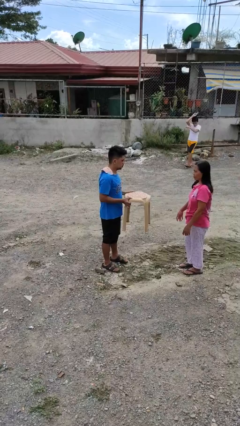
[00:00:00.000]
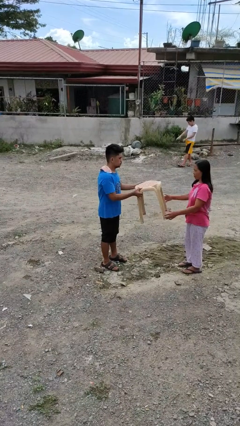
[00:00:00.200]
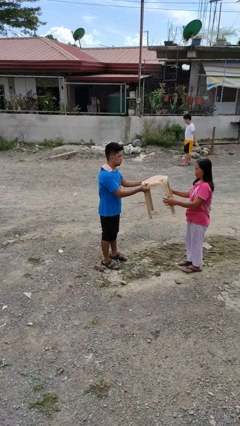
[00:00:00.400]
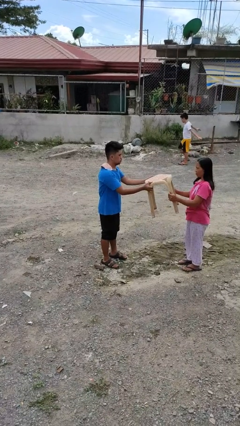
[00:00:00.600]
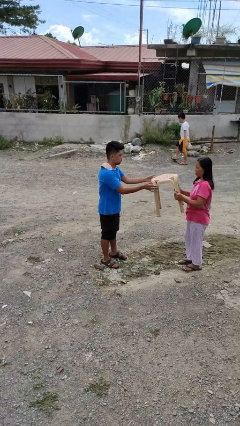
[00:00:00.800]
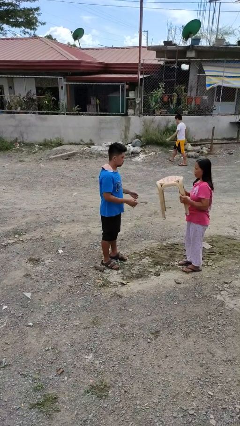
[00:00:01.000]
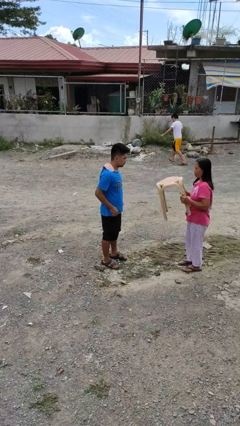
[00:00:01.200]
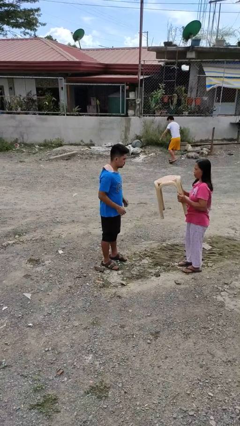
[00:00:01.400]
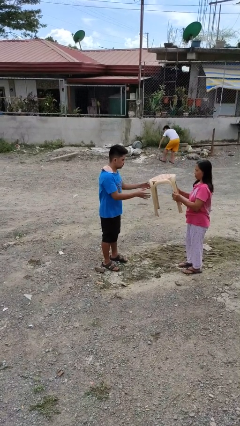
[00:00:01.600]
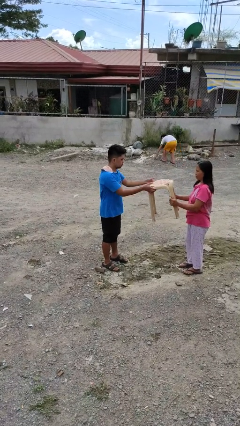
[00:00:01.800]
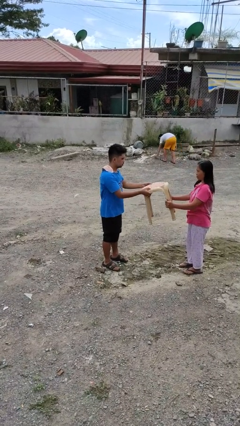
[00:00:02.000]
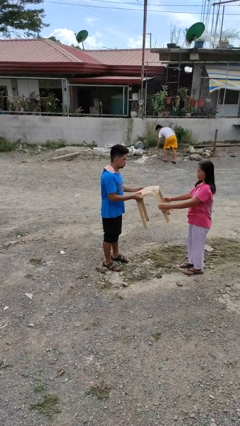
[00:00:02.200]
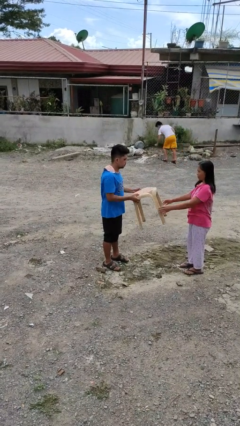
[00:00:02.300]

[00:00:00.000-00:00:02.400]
person transfers object to person

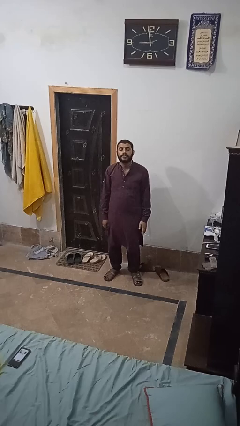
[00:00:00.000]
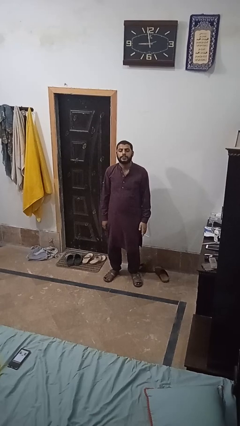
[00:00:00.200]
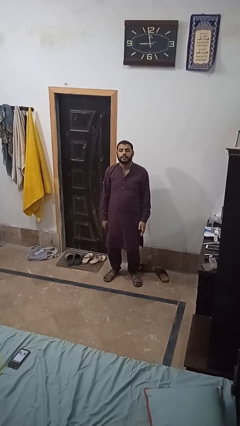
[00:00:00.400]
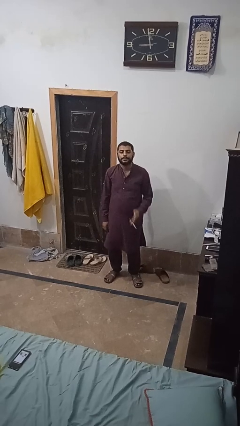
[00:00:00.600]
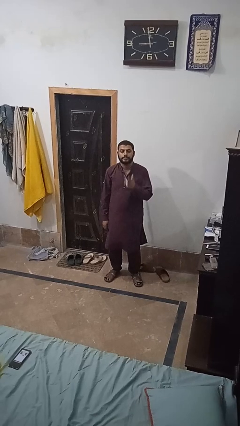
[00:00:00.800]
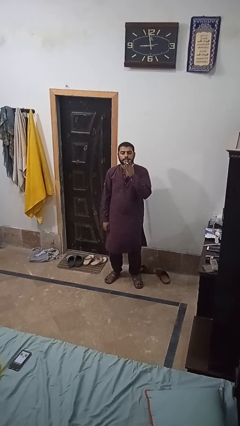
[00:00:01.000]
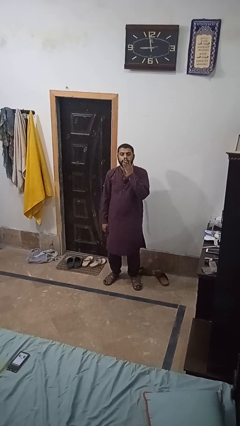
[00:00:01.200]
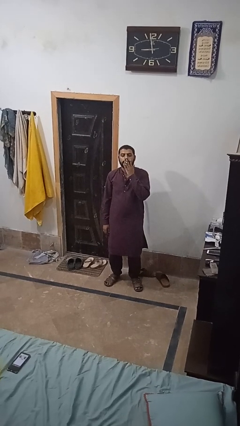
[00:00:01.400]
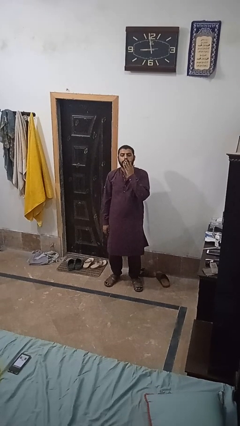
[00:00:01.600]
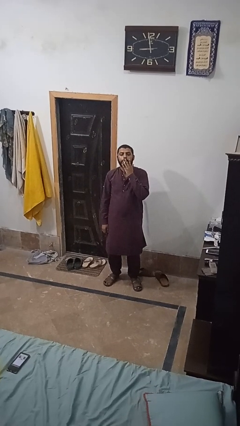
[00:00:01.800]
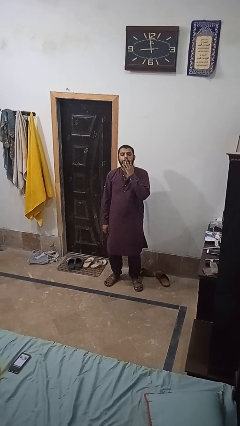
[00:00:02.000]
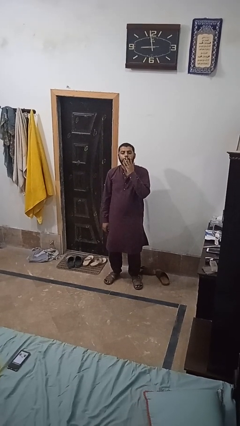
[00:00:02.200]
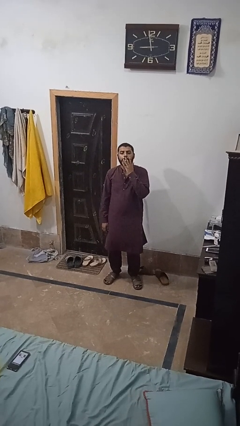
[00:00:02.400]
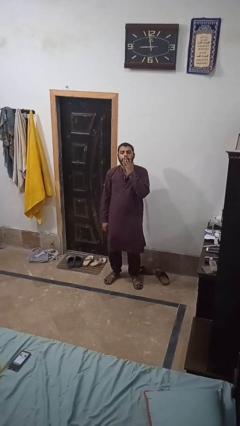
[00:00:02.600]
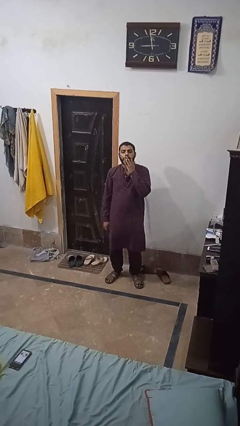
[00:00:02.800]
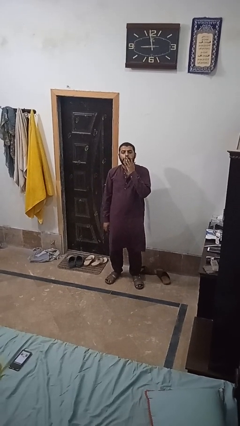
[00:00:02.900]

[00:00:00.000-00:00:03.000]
person vapes

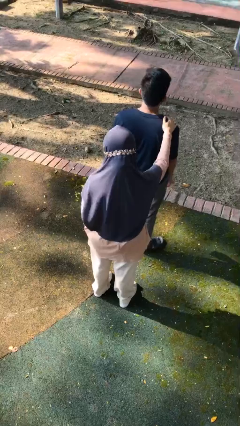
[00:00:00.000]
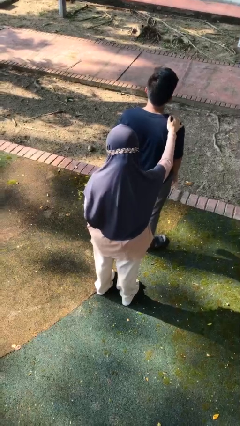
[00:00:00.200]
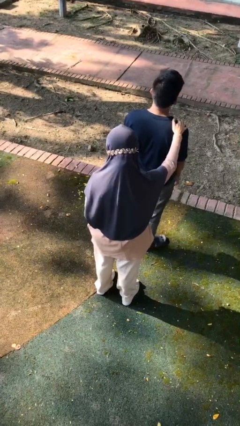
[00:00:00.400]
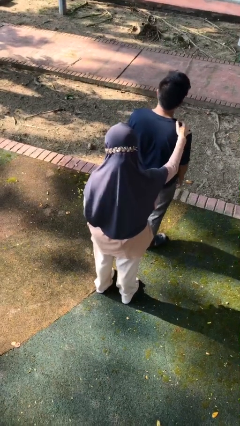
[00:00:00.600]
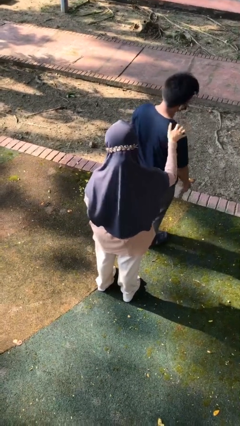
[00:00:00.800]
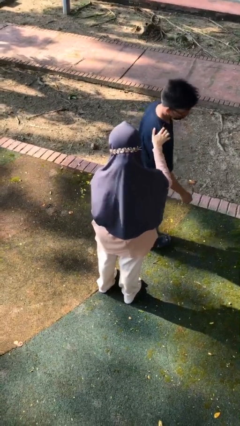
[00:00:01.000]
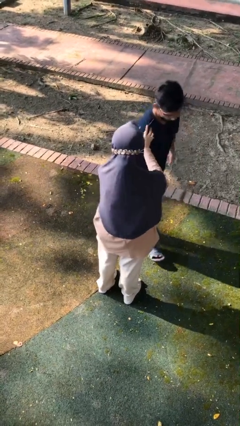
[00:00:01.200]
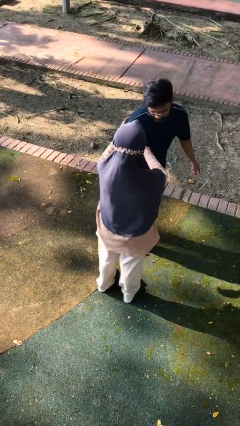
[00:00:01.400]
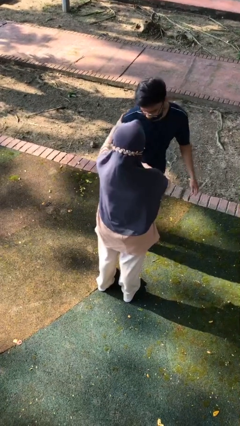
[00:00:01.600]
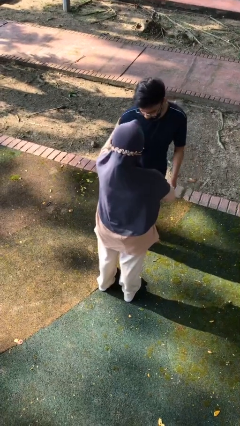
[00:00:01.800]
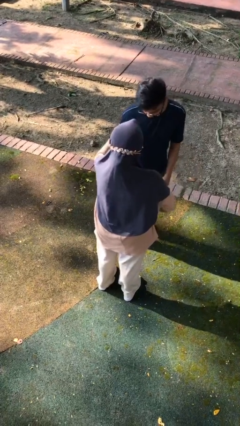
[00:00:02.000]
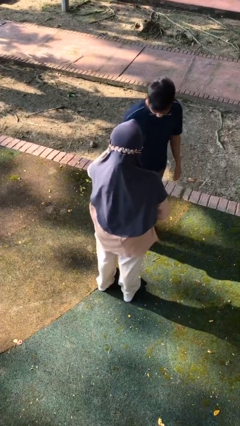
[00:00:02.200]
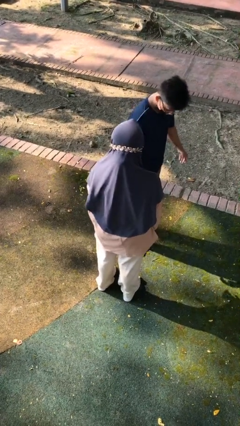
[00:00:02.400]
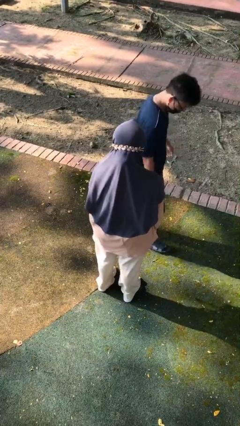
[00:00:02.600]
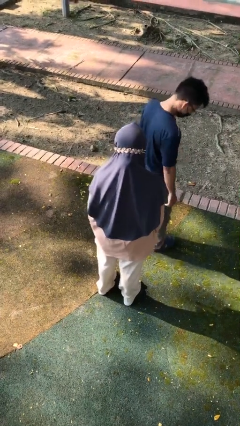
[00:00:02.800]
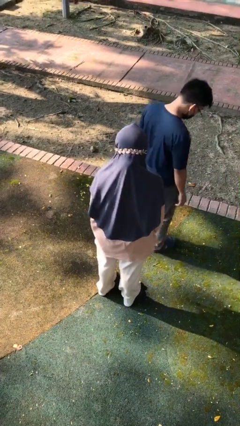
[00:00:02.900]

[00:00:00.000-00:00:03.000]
person spins person around

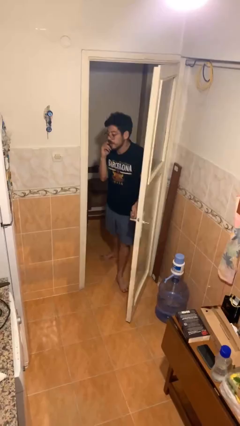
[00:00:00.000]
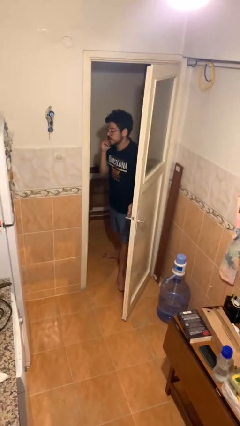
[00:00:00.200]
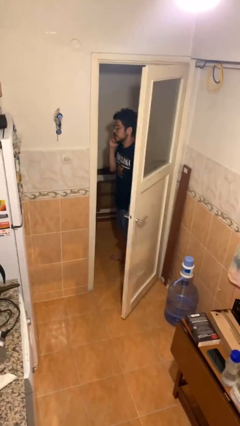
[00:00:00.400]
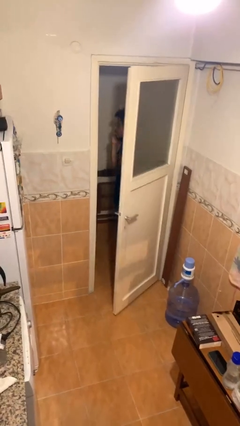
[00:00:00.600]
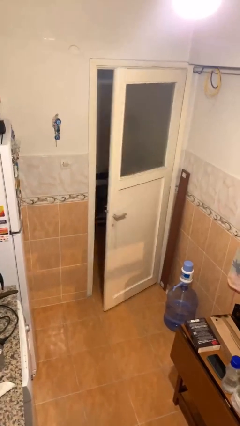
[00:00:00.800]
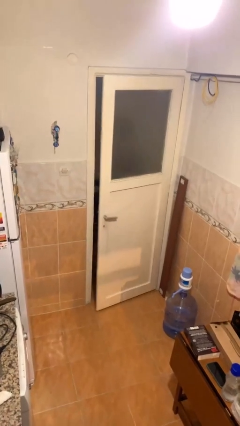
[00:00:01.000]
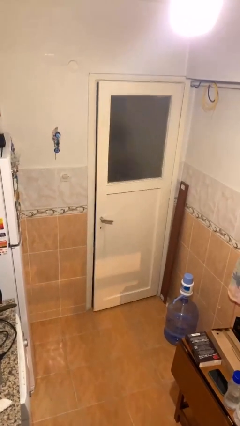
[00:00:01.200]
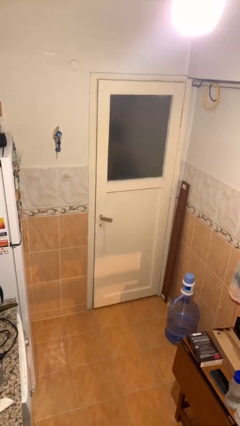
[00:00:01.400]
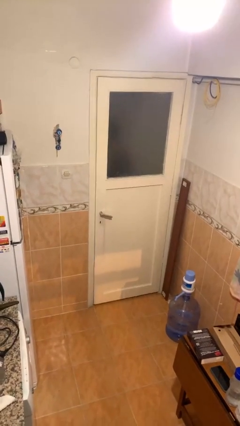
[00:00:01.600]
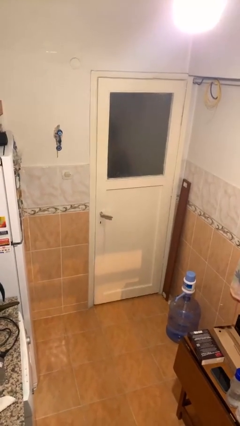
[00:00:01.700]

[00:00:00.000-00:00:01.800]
person closes facility door

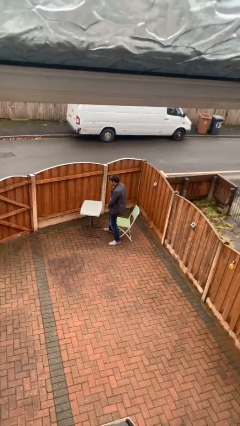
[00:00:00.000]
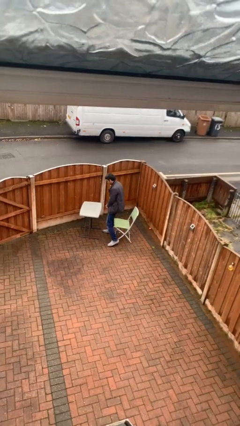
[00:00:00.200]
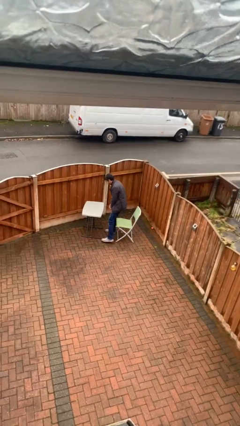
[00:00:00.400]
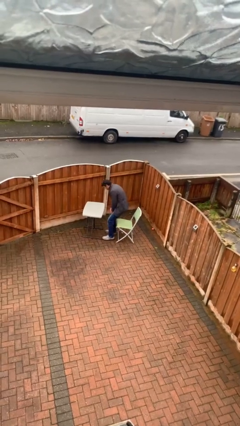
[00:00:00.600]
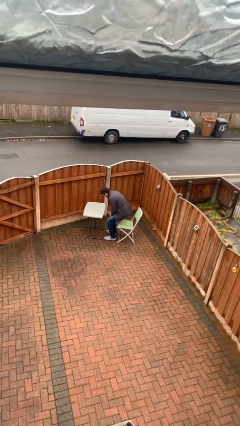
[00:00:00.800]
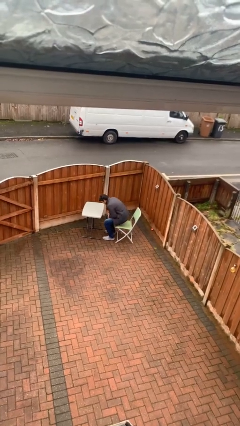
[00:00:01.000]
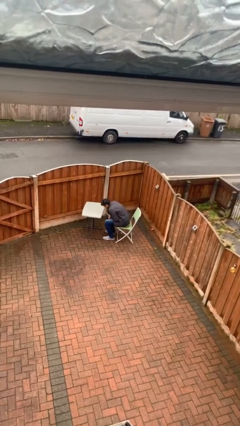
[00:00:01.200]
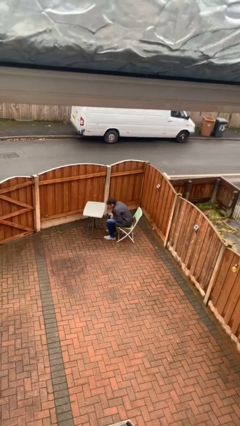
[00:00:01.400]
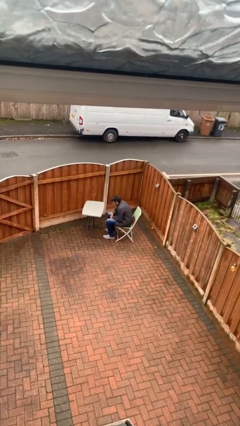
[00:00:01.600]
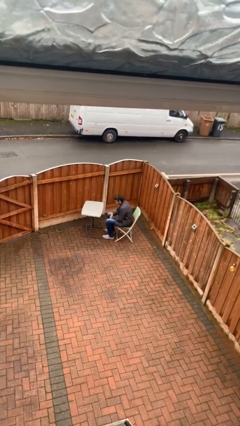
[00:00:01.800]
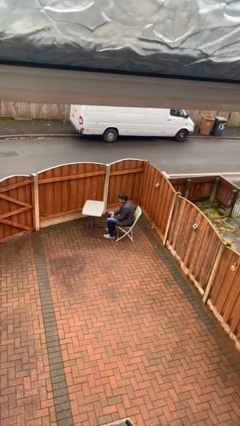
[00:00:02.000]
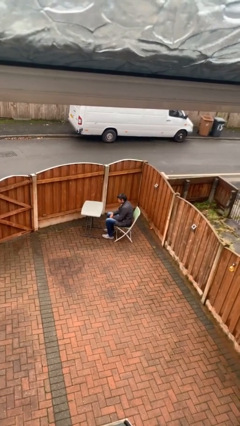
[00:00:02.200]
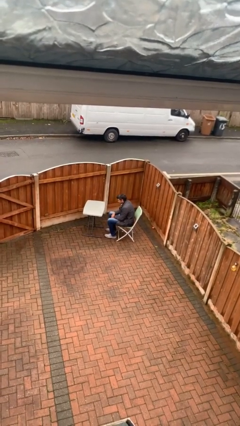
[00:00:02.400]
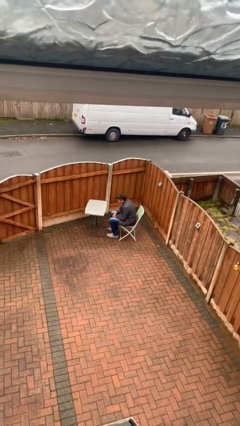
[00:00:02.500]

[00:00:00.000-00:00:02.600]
person sits down

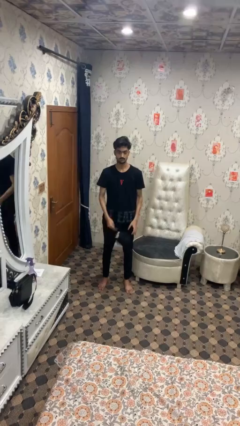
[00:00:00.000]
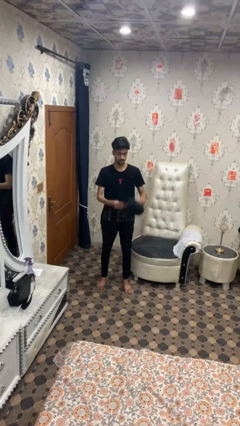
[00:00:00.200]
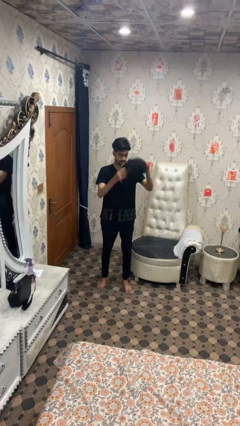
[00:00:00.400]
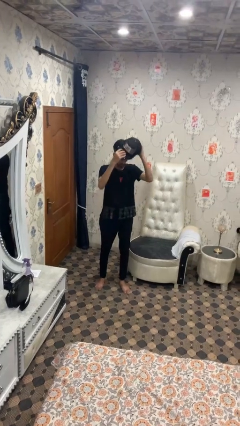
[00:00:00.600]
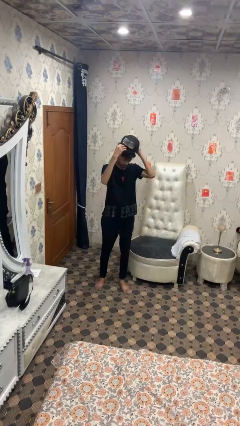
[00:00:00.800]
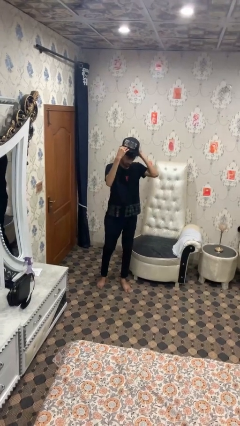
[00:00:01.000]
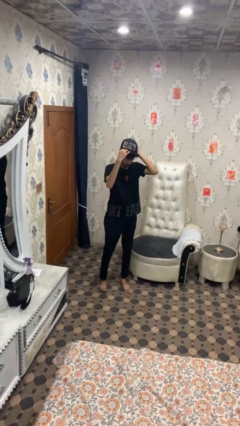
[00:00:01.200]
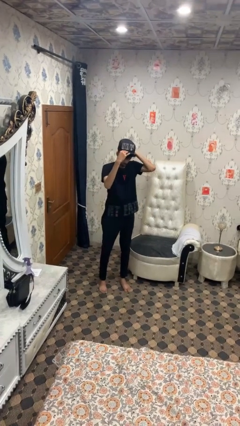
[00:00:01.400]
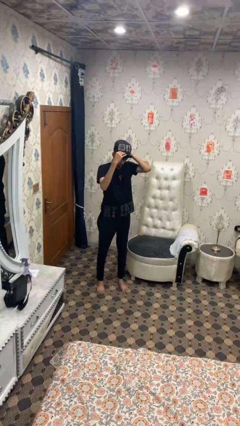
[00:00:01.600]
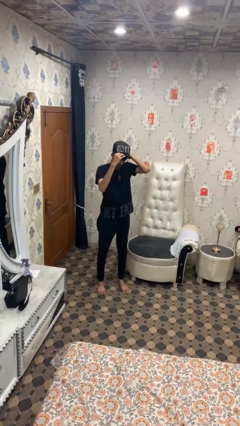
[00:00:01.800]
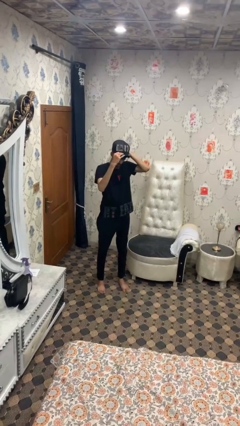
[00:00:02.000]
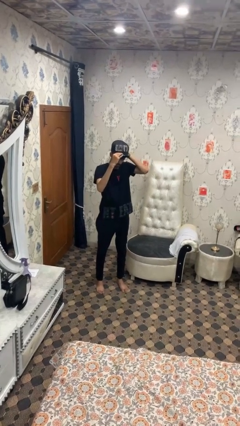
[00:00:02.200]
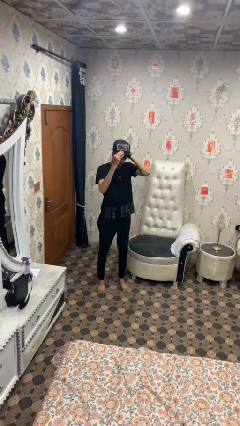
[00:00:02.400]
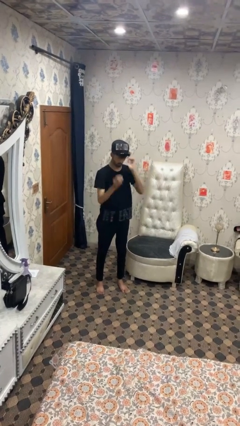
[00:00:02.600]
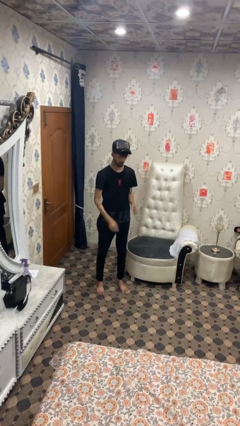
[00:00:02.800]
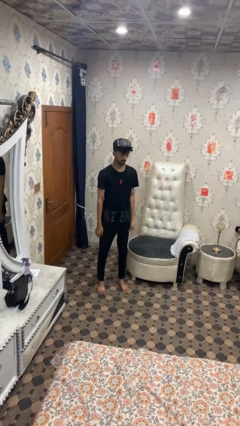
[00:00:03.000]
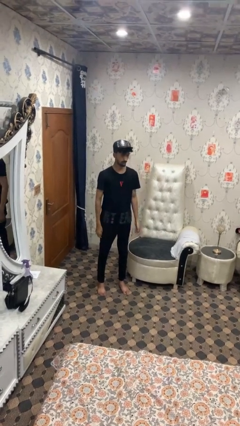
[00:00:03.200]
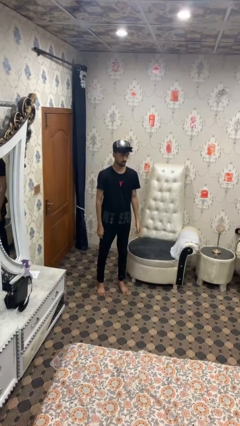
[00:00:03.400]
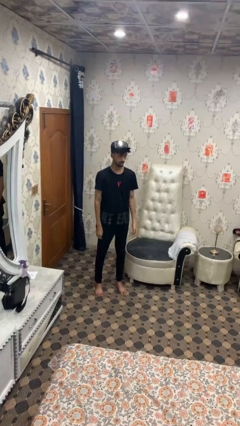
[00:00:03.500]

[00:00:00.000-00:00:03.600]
person puts on hat

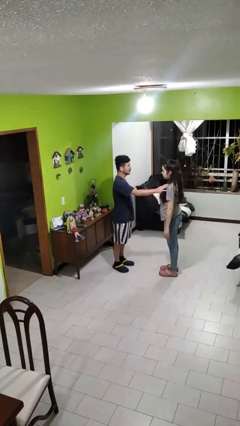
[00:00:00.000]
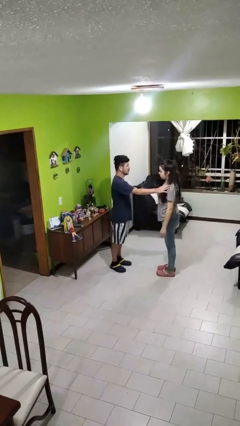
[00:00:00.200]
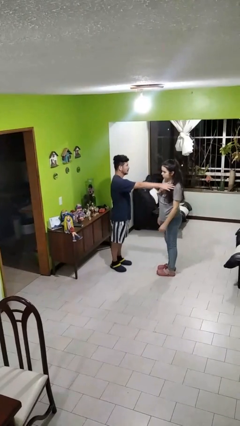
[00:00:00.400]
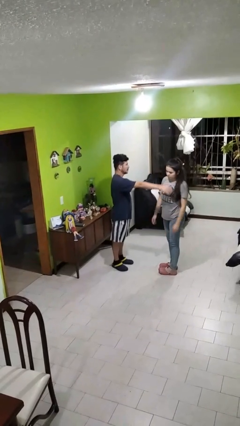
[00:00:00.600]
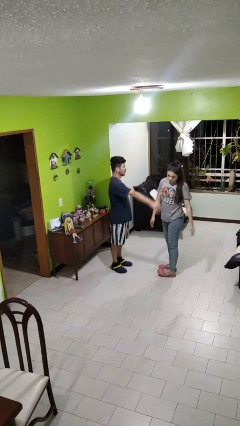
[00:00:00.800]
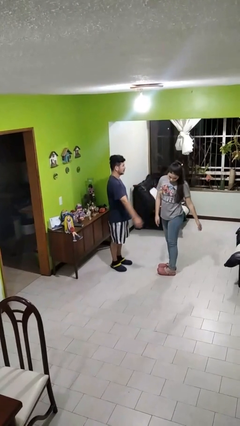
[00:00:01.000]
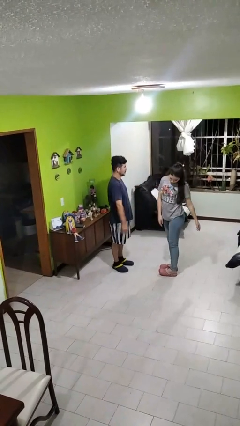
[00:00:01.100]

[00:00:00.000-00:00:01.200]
person shoves person
